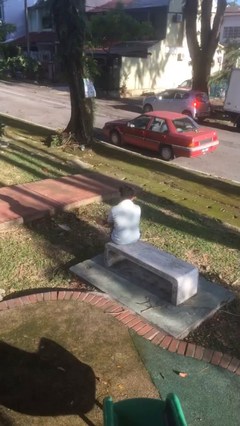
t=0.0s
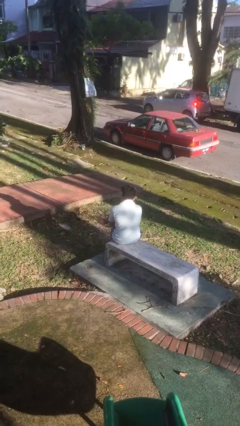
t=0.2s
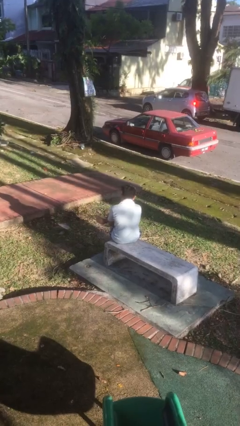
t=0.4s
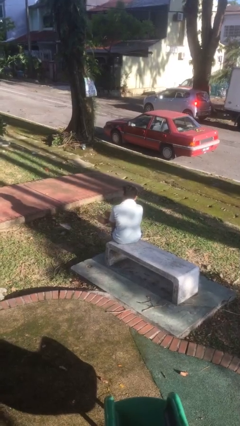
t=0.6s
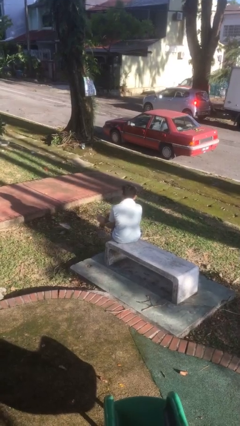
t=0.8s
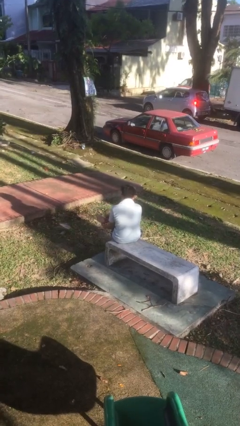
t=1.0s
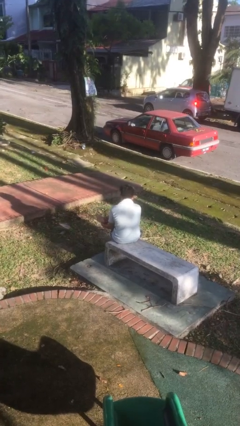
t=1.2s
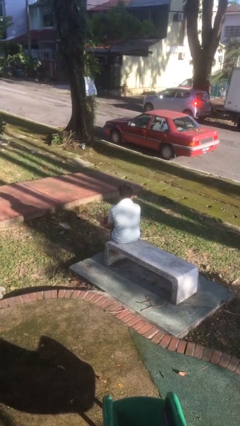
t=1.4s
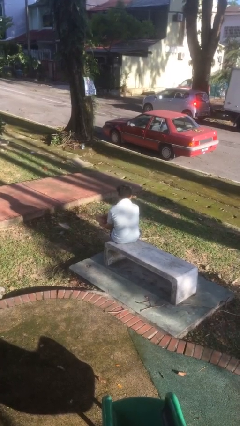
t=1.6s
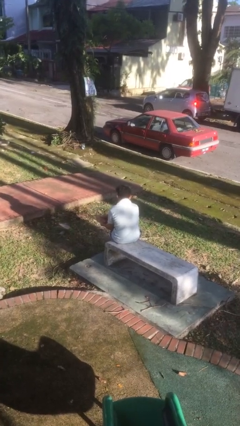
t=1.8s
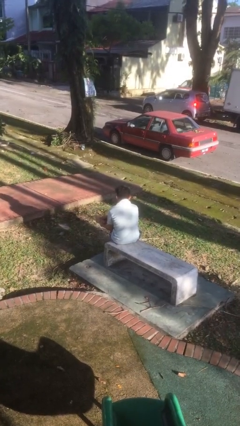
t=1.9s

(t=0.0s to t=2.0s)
person rubs foot

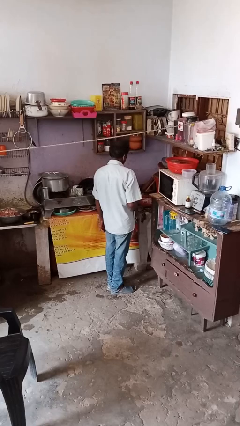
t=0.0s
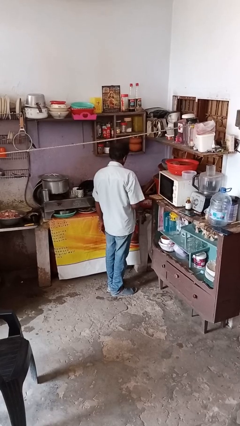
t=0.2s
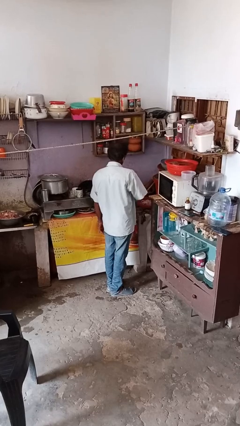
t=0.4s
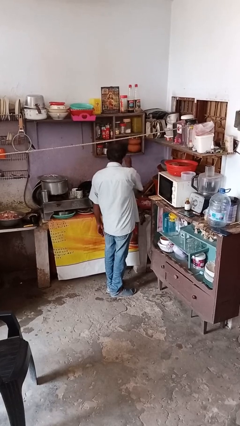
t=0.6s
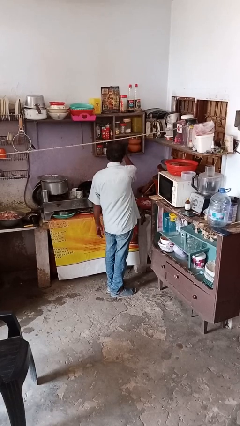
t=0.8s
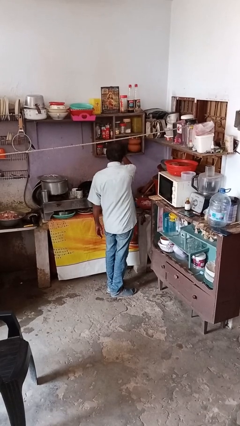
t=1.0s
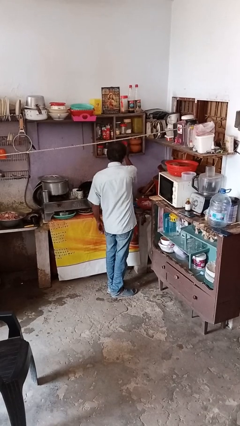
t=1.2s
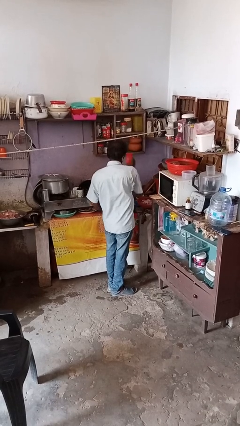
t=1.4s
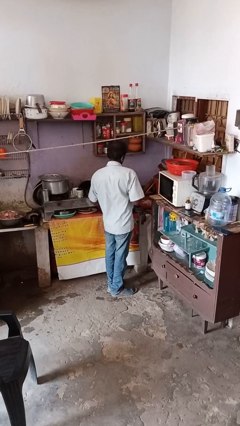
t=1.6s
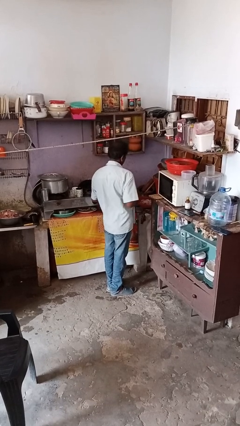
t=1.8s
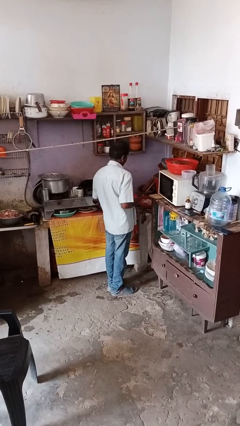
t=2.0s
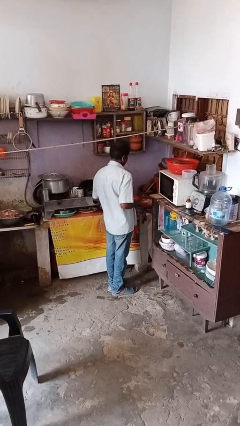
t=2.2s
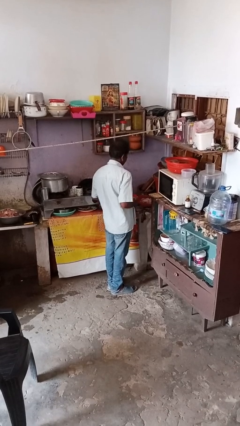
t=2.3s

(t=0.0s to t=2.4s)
person picks up object from shelf

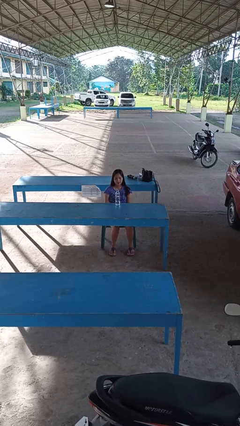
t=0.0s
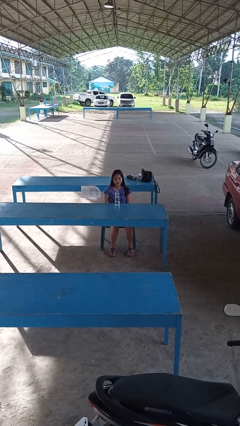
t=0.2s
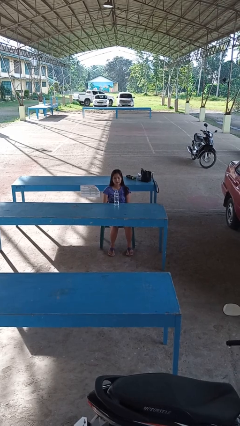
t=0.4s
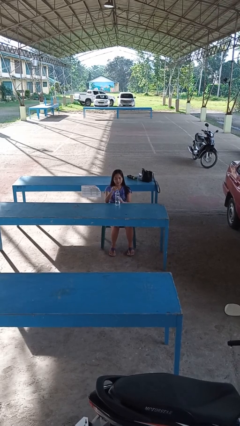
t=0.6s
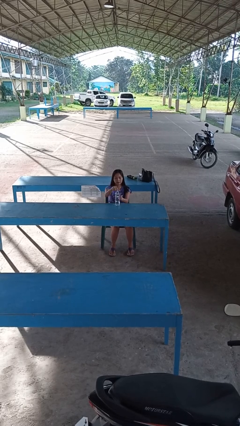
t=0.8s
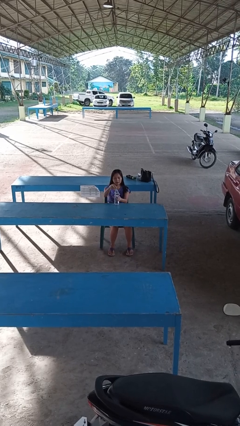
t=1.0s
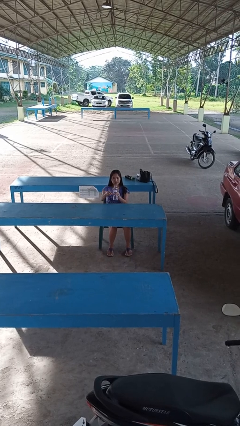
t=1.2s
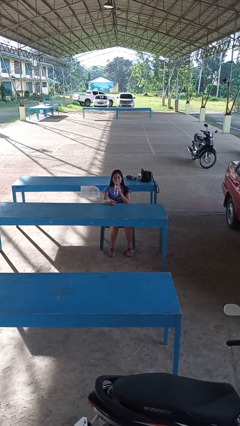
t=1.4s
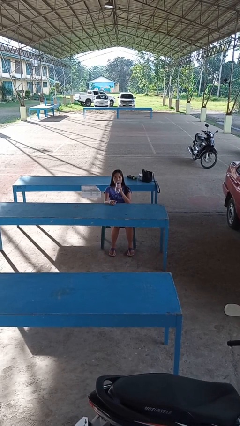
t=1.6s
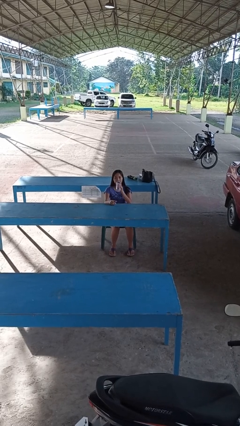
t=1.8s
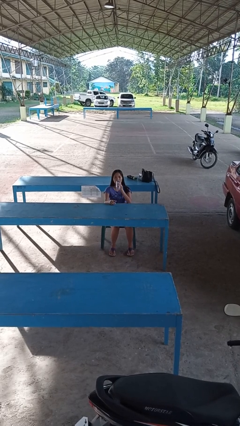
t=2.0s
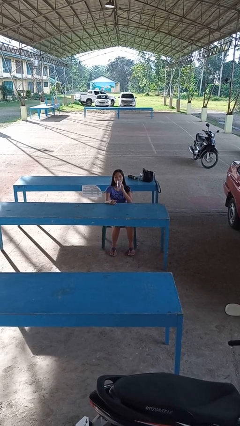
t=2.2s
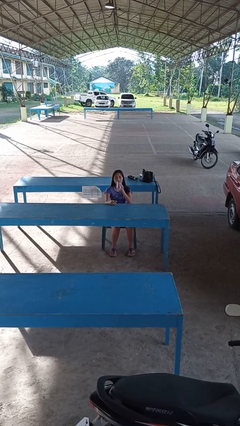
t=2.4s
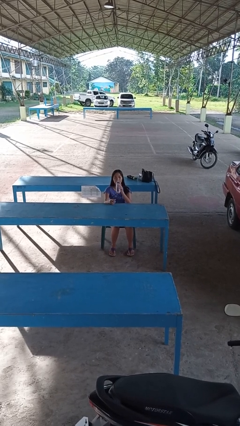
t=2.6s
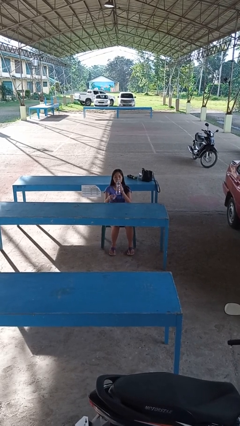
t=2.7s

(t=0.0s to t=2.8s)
person drinks from bottle

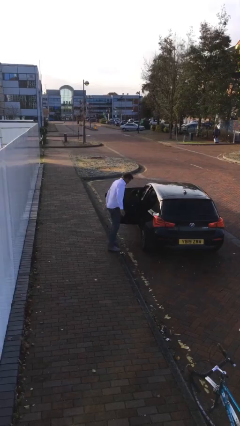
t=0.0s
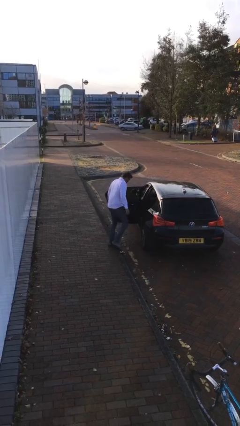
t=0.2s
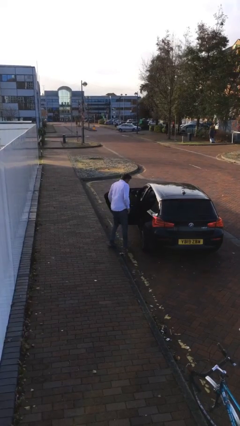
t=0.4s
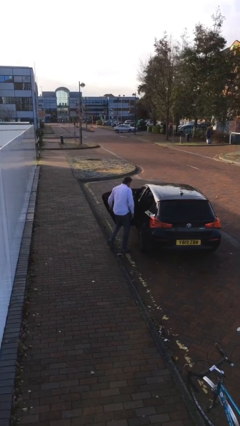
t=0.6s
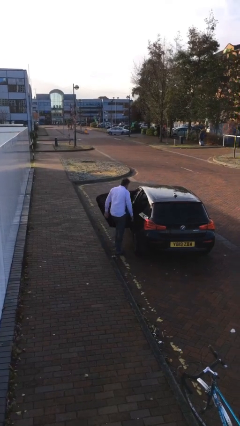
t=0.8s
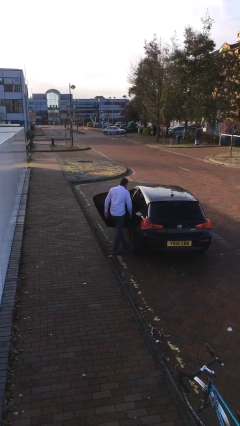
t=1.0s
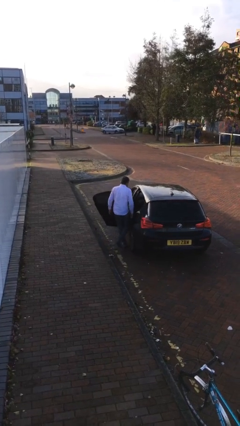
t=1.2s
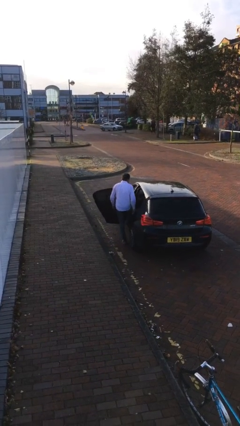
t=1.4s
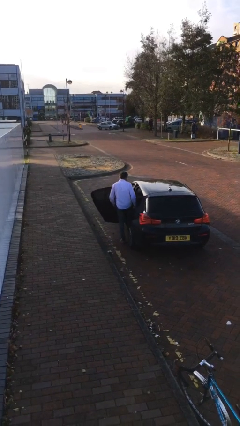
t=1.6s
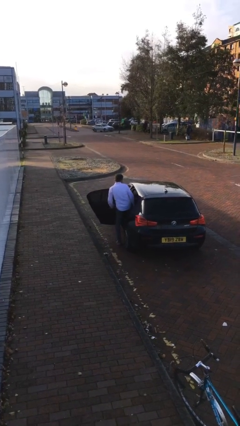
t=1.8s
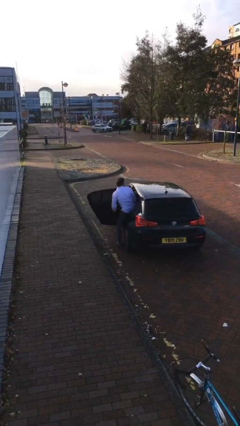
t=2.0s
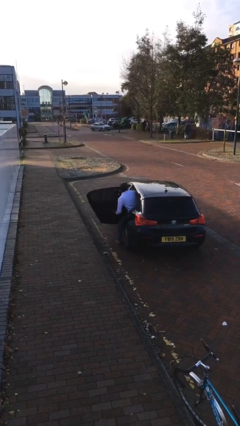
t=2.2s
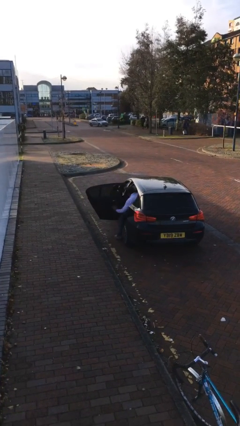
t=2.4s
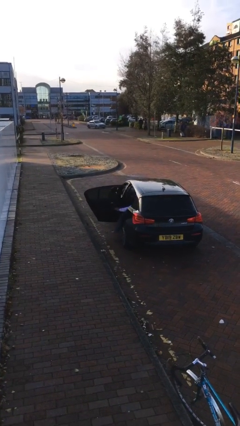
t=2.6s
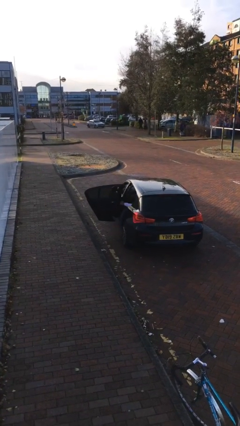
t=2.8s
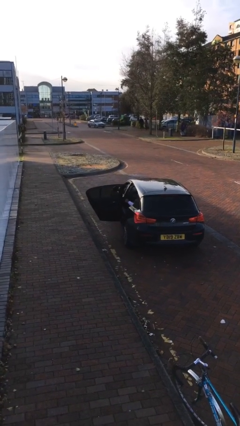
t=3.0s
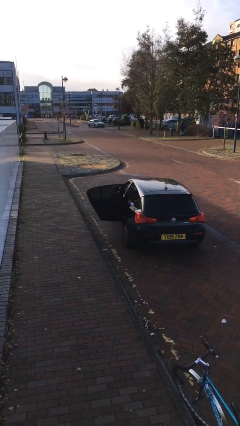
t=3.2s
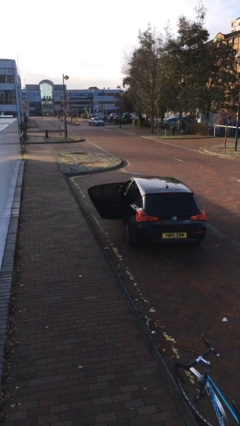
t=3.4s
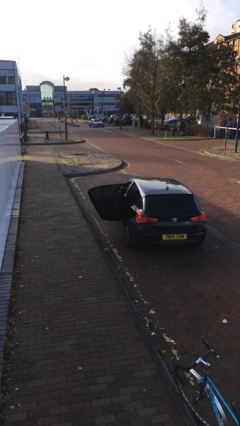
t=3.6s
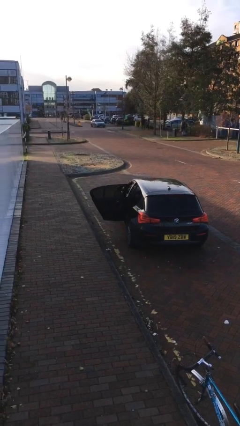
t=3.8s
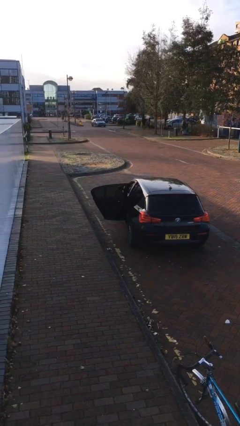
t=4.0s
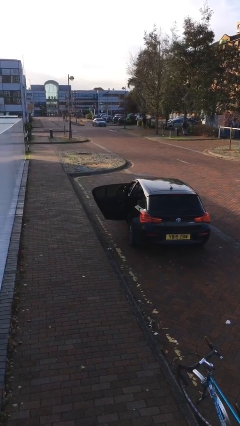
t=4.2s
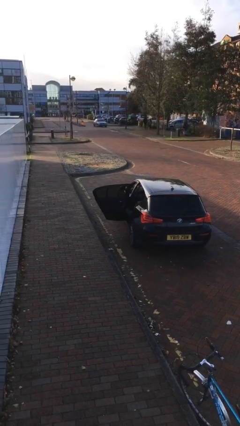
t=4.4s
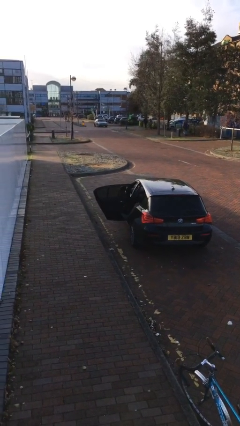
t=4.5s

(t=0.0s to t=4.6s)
person enters car

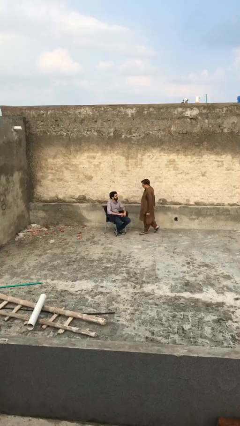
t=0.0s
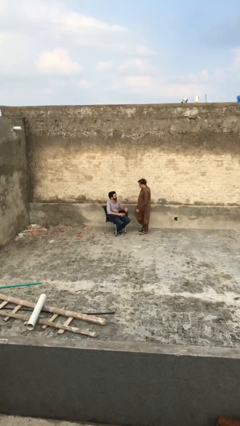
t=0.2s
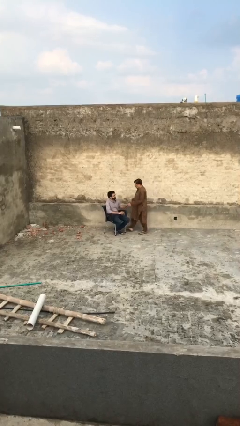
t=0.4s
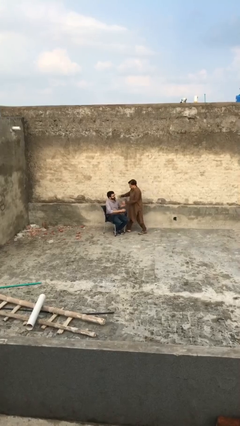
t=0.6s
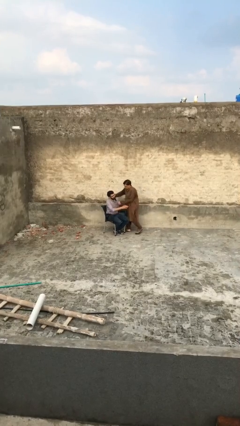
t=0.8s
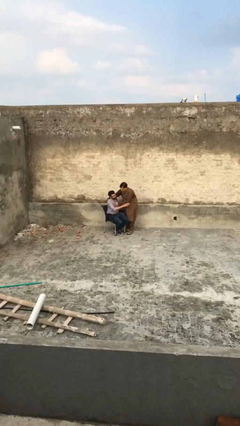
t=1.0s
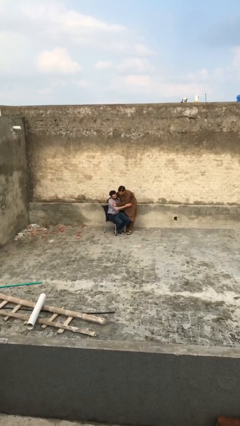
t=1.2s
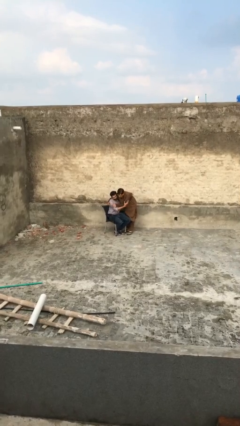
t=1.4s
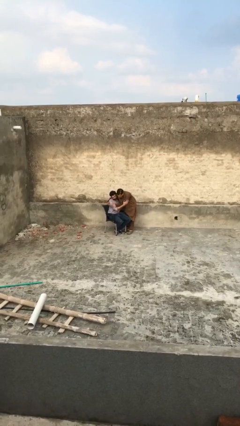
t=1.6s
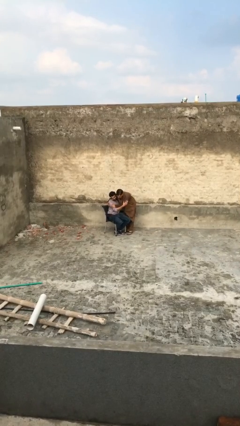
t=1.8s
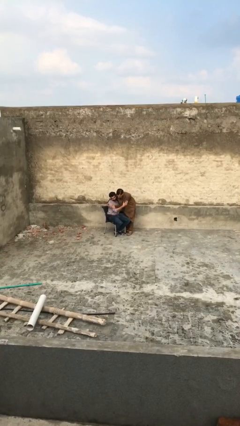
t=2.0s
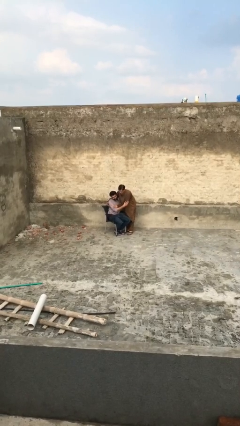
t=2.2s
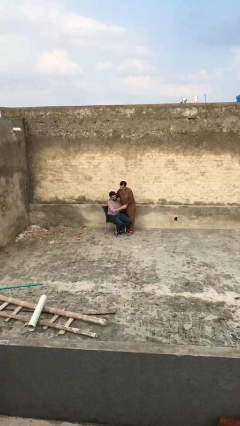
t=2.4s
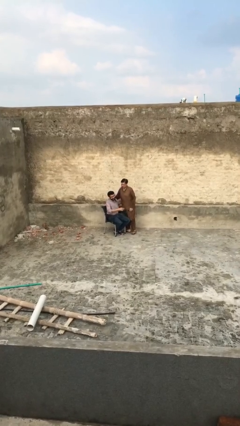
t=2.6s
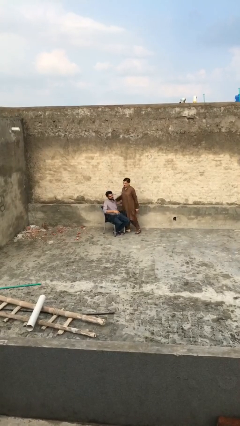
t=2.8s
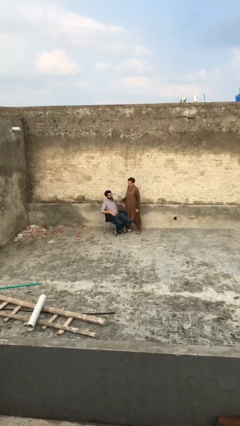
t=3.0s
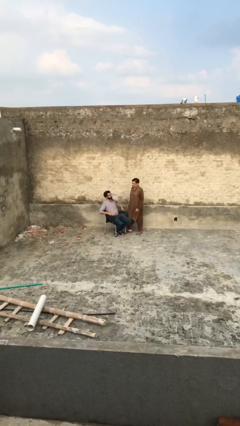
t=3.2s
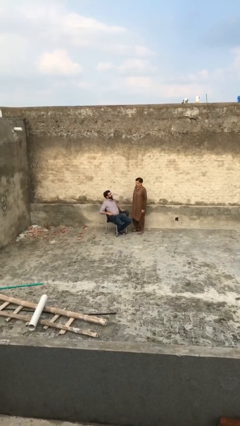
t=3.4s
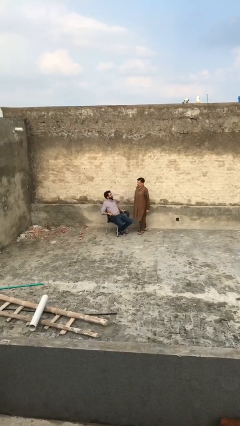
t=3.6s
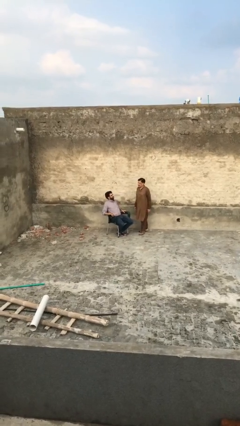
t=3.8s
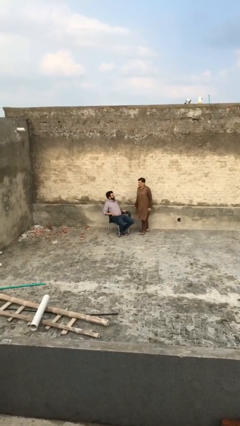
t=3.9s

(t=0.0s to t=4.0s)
person embraces person

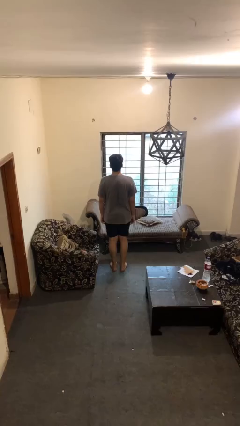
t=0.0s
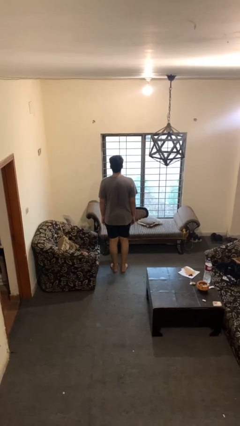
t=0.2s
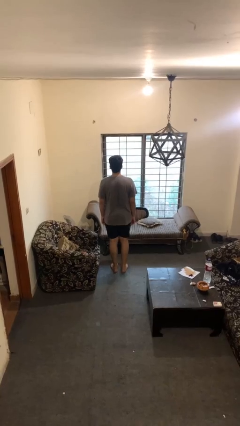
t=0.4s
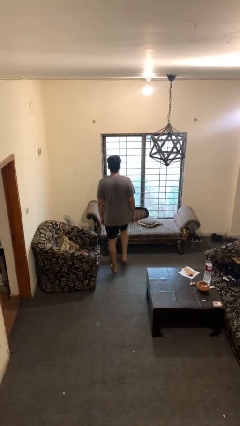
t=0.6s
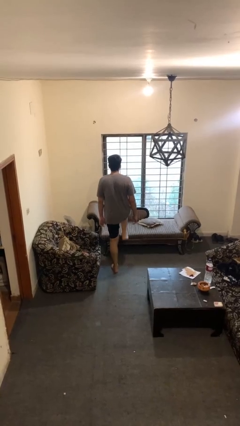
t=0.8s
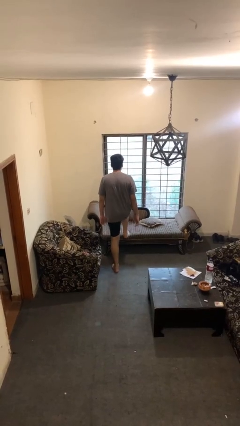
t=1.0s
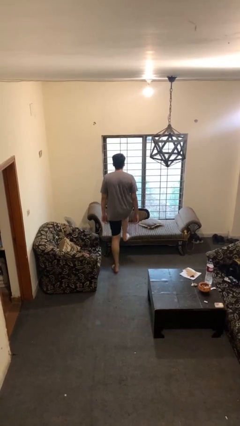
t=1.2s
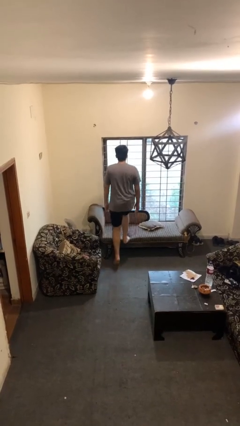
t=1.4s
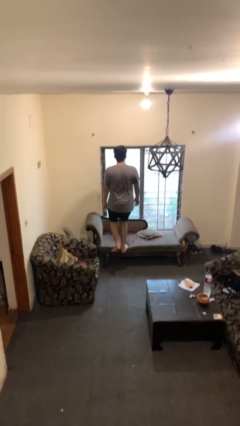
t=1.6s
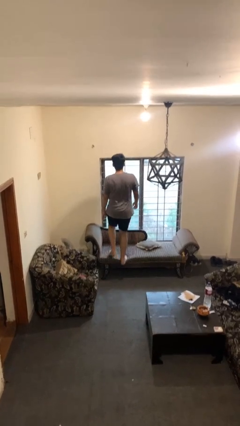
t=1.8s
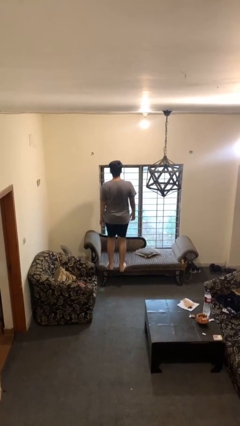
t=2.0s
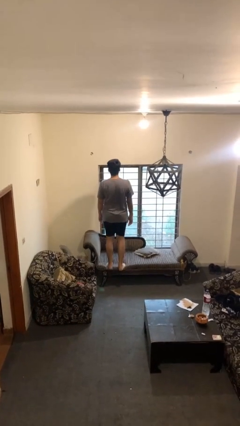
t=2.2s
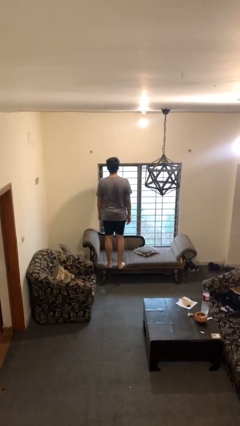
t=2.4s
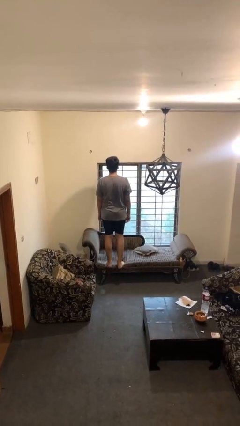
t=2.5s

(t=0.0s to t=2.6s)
person climbs on couch
